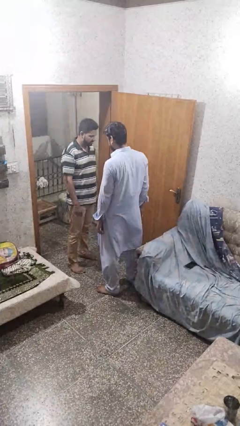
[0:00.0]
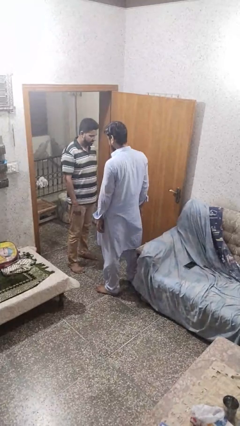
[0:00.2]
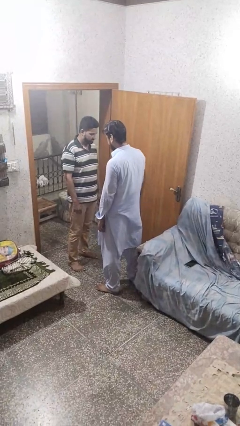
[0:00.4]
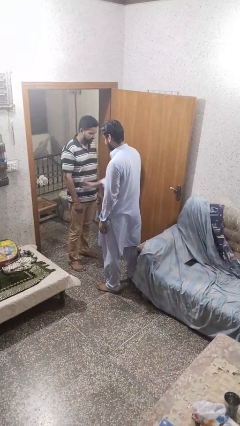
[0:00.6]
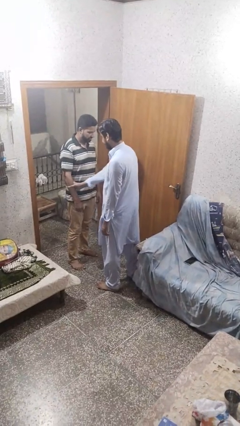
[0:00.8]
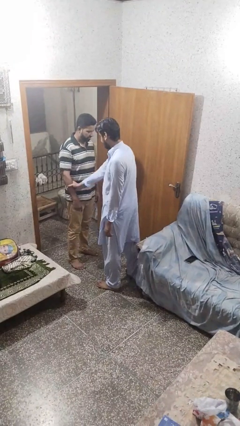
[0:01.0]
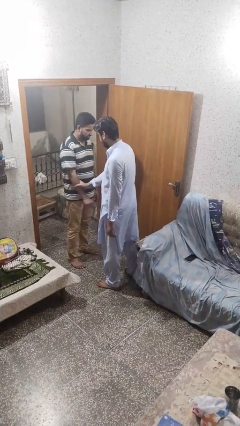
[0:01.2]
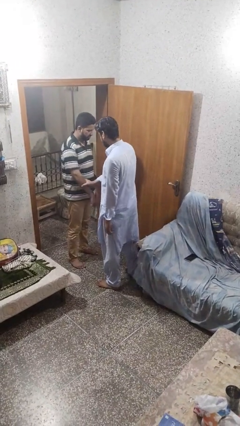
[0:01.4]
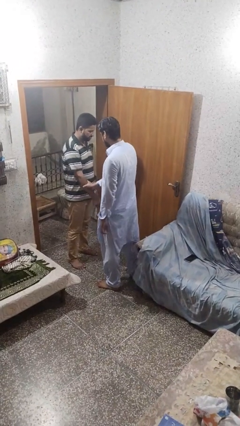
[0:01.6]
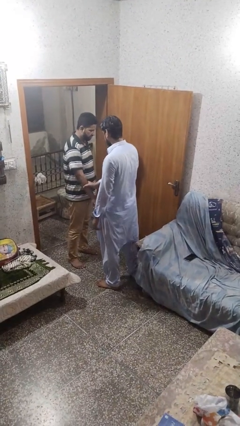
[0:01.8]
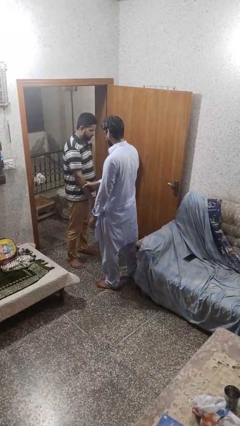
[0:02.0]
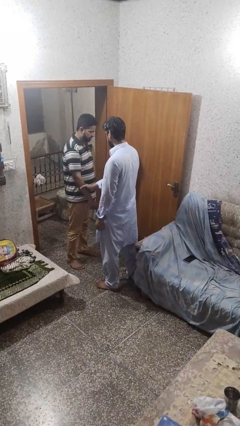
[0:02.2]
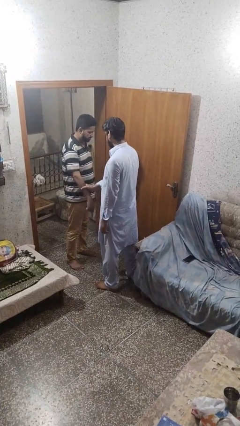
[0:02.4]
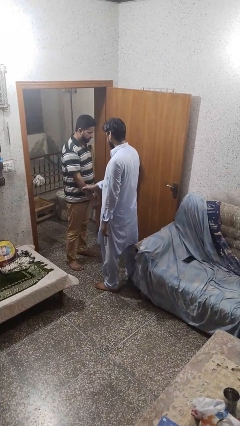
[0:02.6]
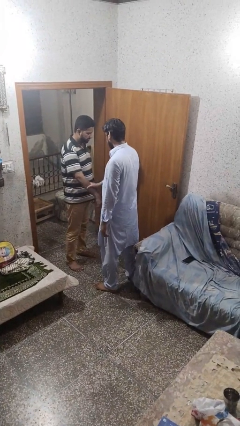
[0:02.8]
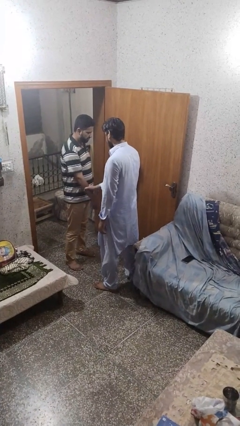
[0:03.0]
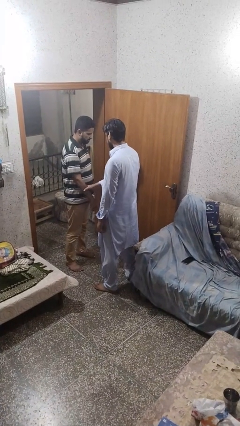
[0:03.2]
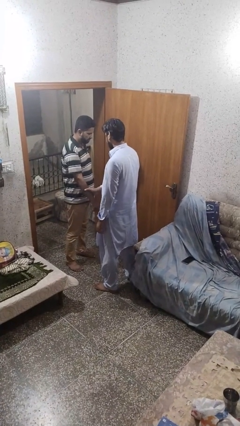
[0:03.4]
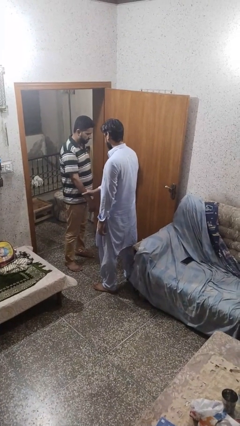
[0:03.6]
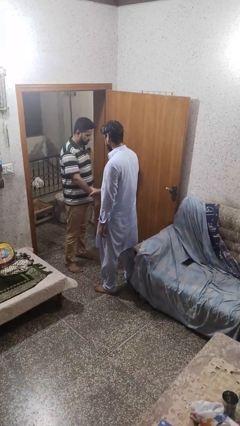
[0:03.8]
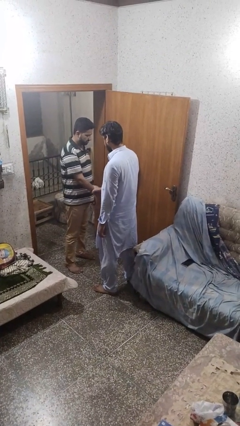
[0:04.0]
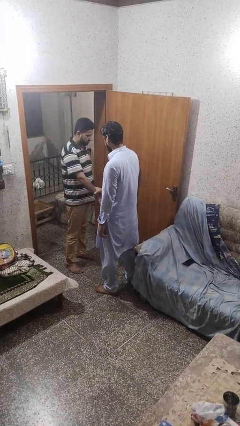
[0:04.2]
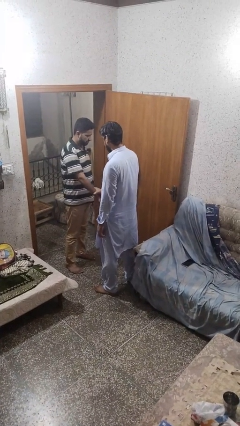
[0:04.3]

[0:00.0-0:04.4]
person grabs person by forearm

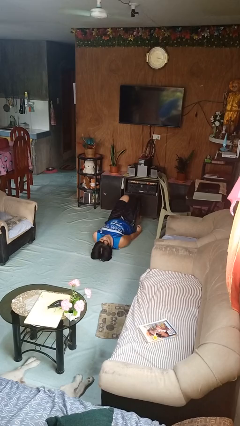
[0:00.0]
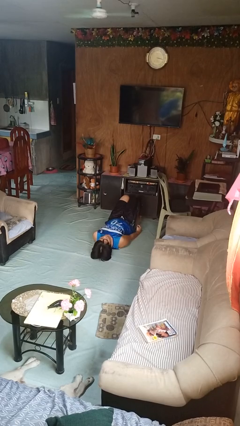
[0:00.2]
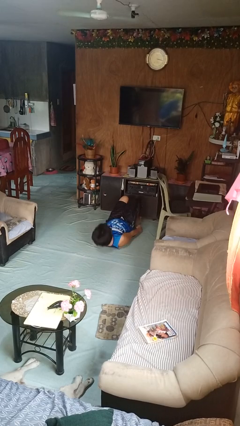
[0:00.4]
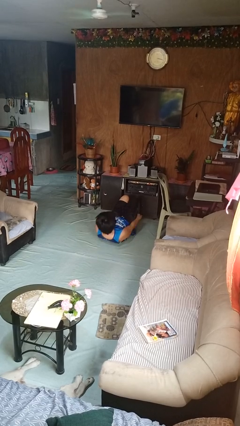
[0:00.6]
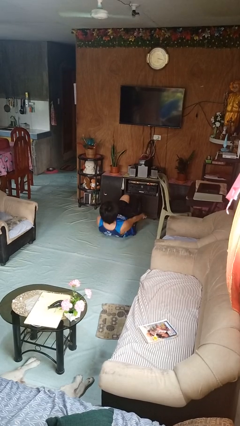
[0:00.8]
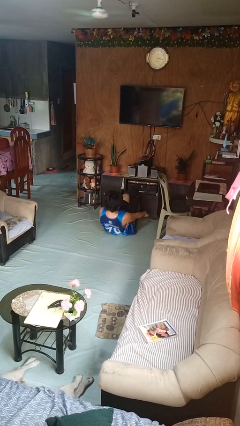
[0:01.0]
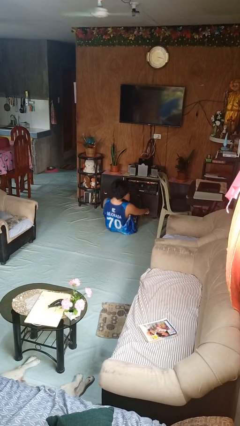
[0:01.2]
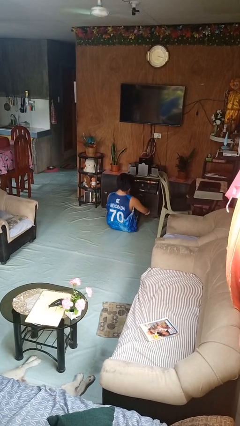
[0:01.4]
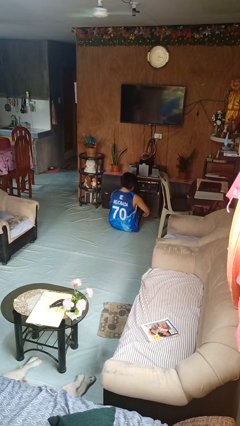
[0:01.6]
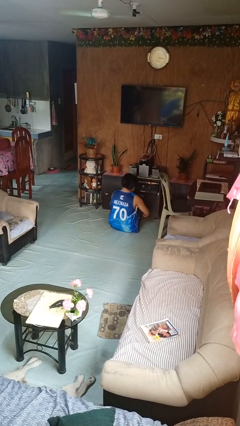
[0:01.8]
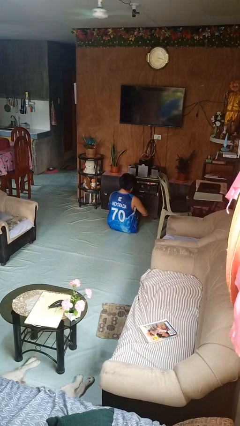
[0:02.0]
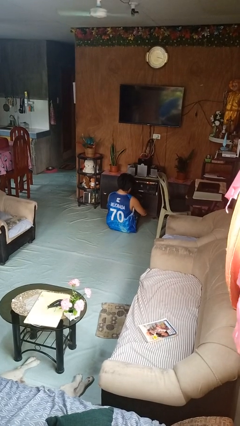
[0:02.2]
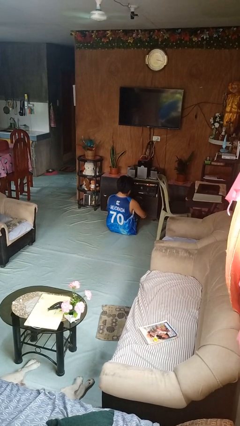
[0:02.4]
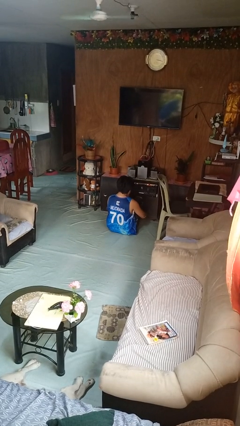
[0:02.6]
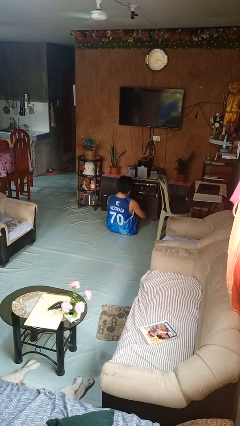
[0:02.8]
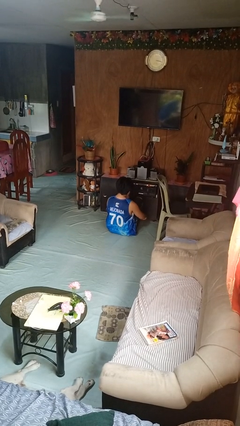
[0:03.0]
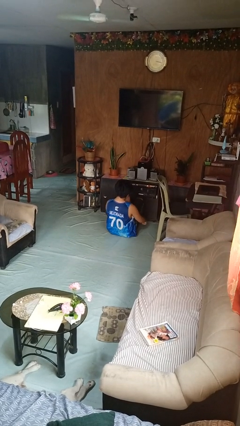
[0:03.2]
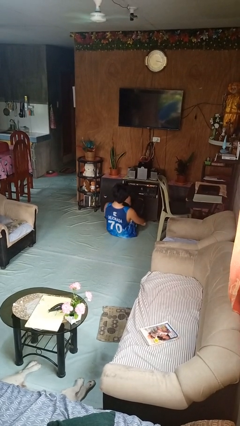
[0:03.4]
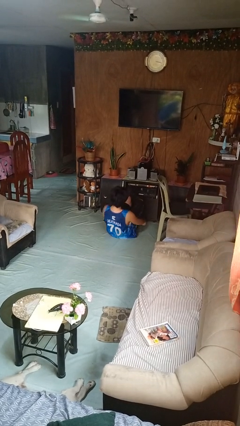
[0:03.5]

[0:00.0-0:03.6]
person exercises with situp

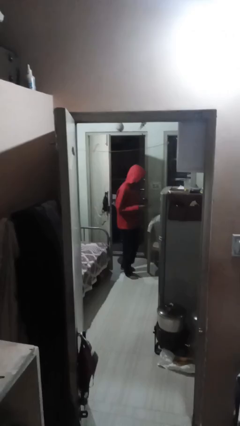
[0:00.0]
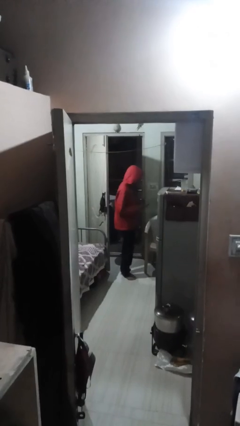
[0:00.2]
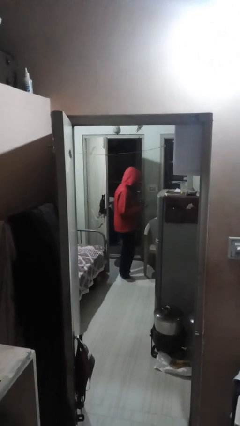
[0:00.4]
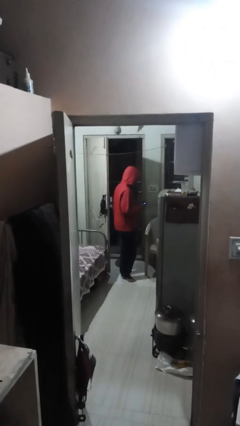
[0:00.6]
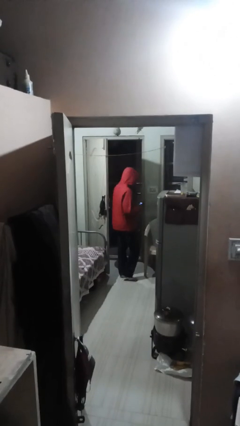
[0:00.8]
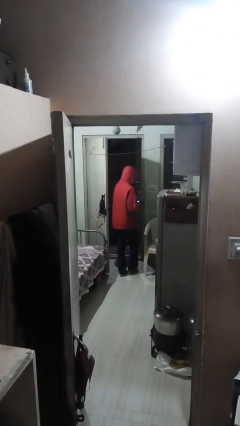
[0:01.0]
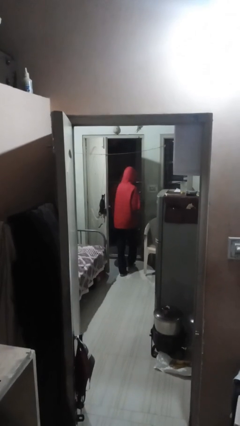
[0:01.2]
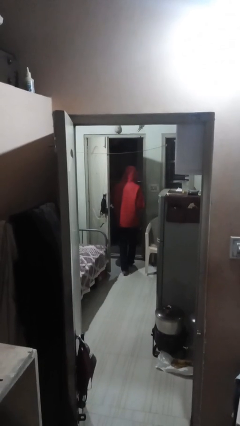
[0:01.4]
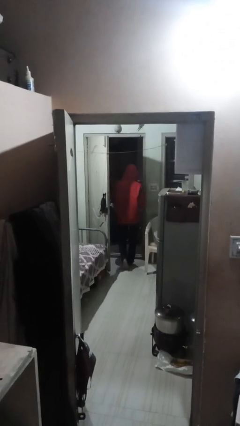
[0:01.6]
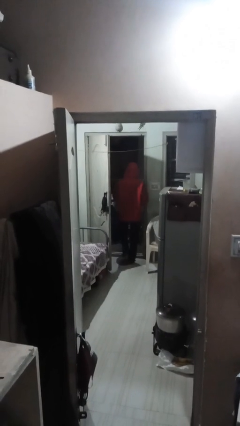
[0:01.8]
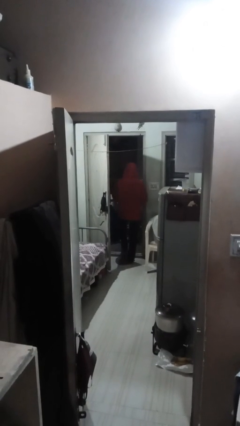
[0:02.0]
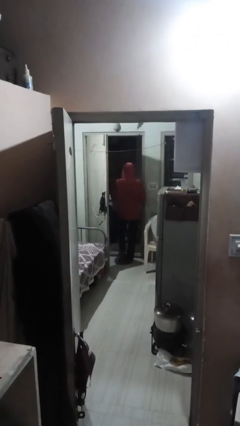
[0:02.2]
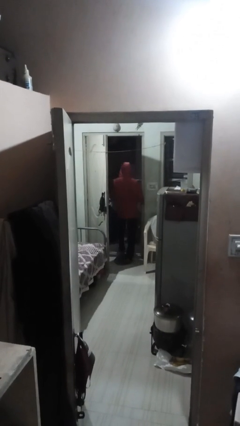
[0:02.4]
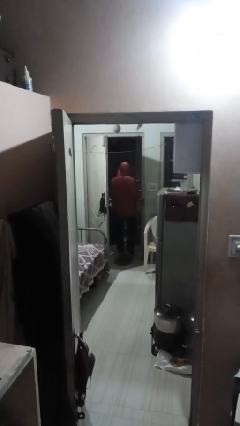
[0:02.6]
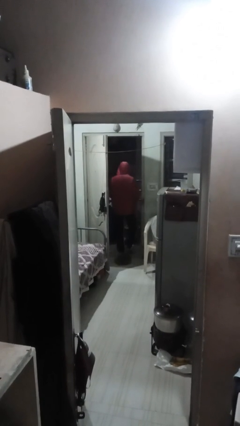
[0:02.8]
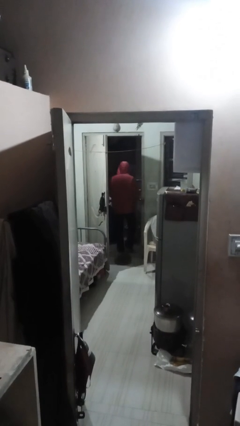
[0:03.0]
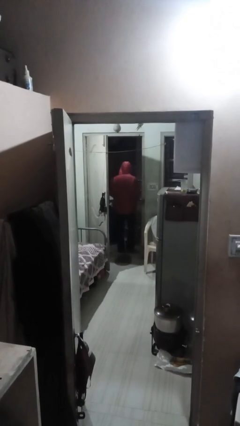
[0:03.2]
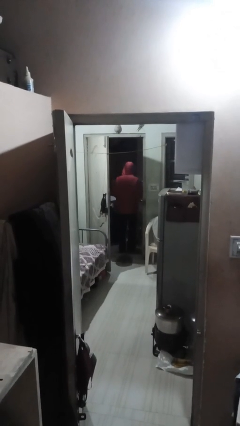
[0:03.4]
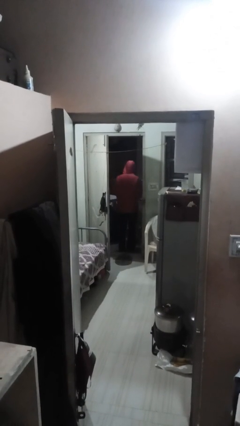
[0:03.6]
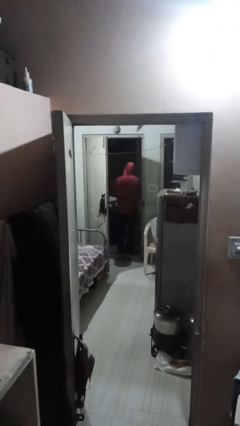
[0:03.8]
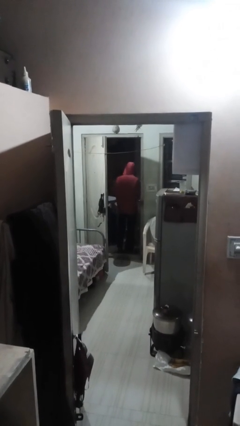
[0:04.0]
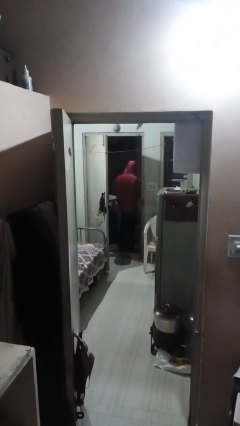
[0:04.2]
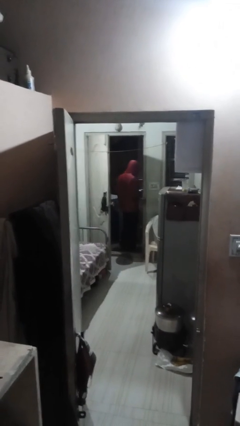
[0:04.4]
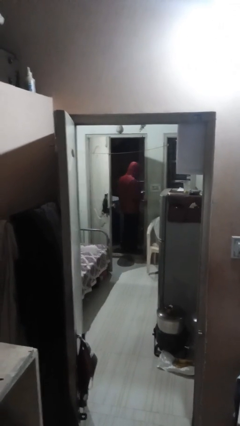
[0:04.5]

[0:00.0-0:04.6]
person exits scene through structure

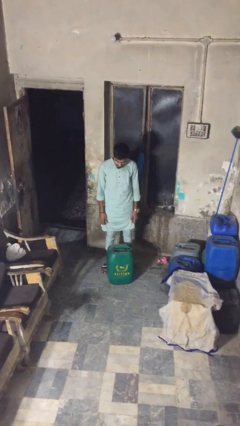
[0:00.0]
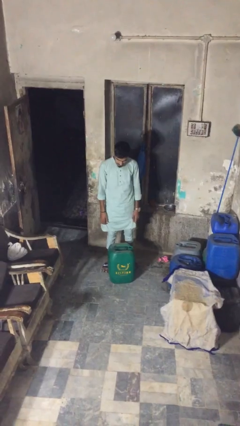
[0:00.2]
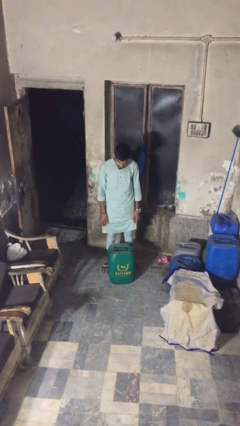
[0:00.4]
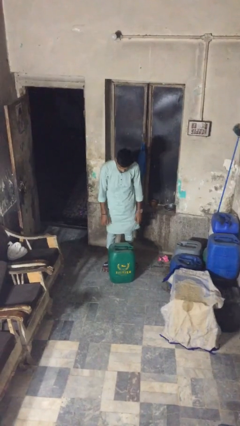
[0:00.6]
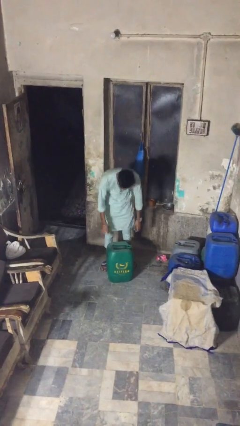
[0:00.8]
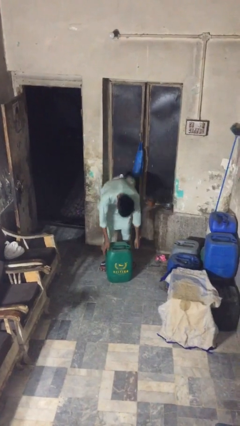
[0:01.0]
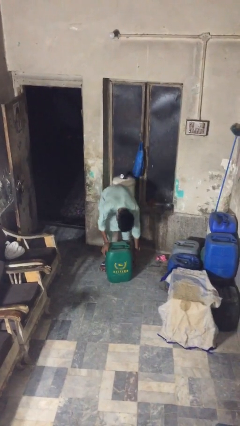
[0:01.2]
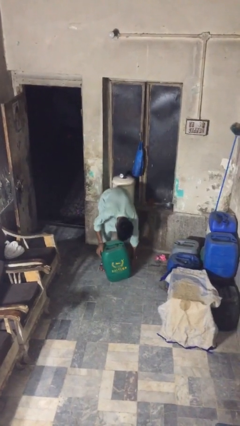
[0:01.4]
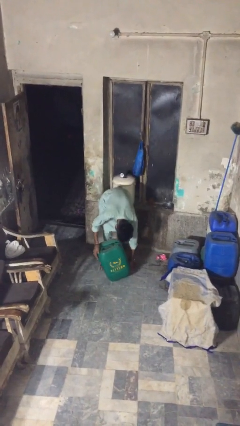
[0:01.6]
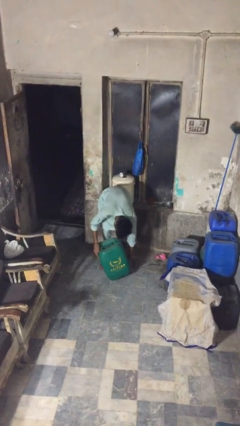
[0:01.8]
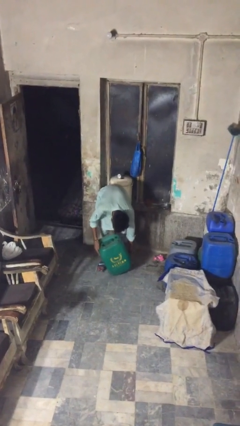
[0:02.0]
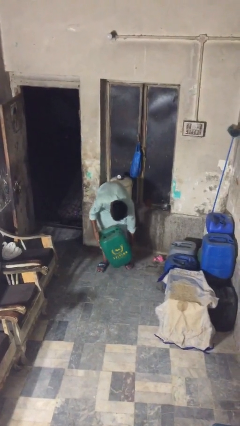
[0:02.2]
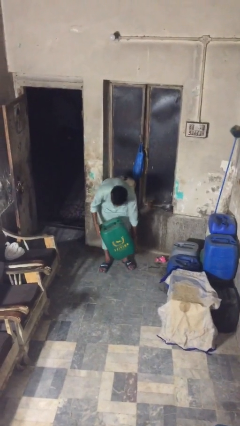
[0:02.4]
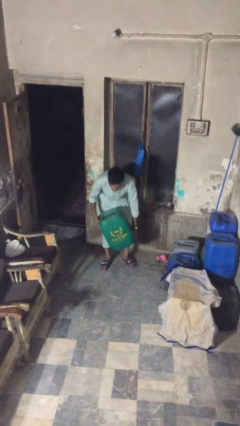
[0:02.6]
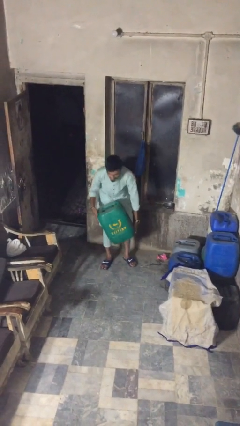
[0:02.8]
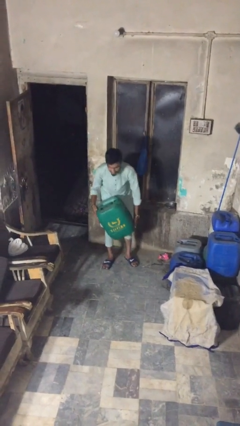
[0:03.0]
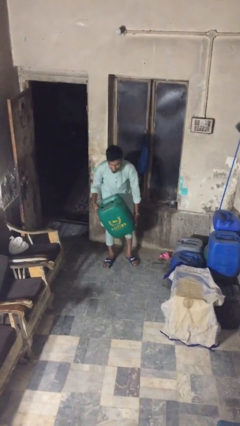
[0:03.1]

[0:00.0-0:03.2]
person picks up object from floor

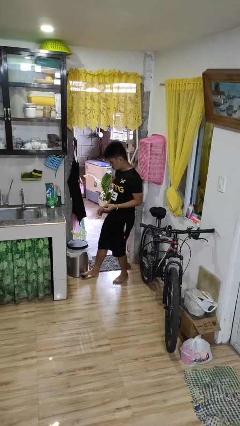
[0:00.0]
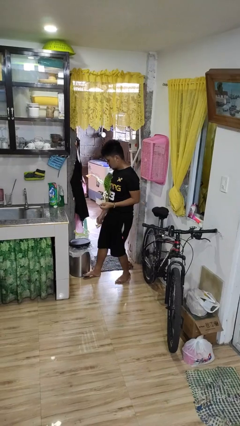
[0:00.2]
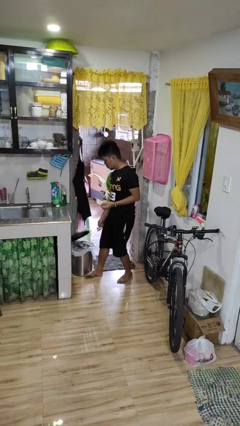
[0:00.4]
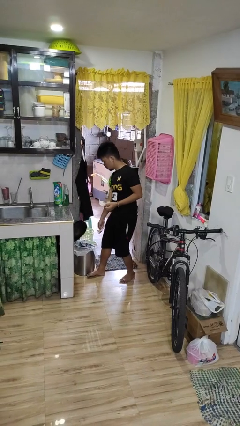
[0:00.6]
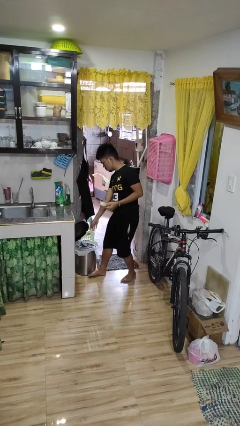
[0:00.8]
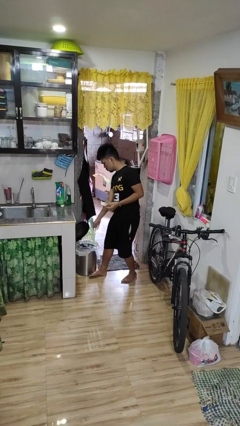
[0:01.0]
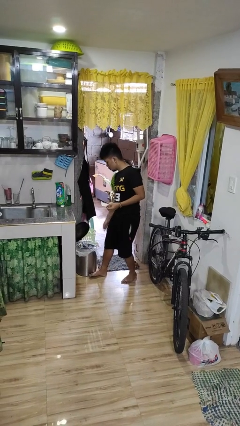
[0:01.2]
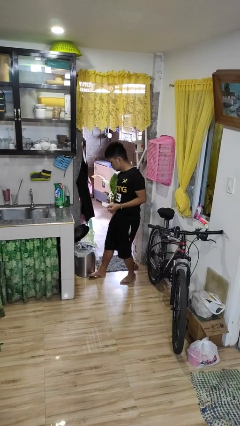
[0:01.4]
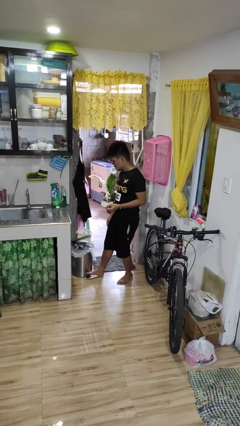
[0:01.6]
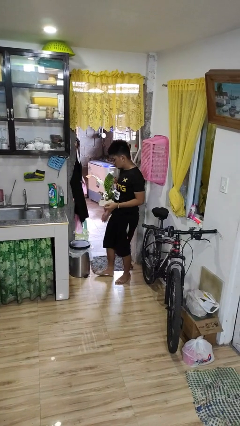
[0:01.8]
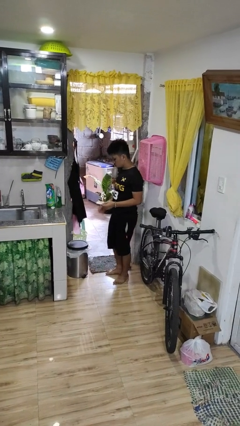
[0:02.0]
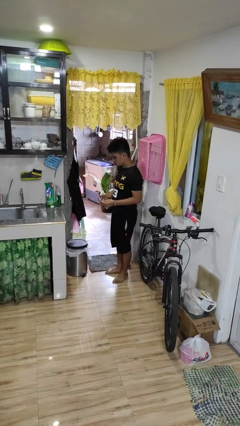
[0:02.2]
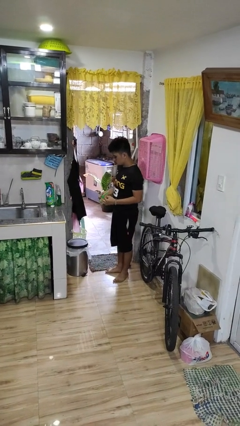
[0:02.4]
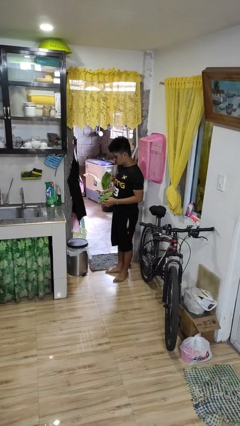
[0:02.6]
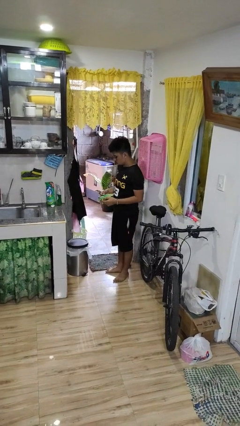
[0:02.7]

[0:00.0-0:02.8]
person discards trash
